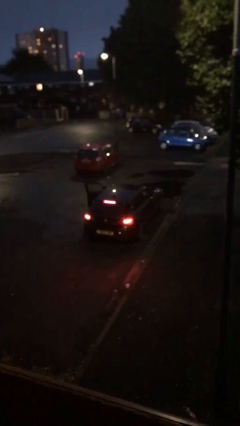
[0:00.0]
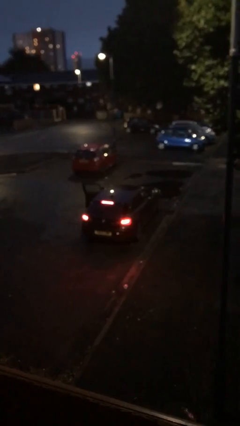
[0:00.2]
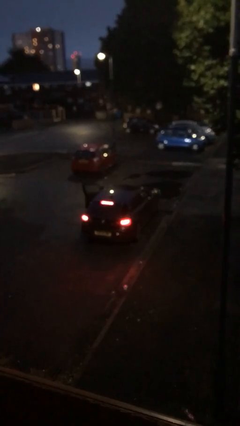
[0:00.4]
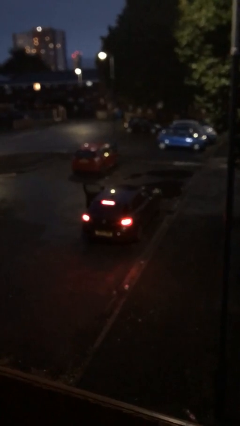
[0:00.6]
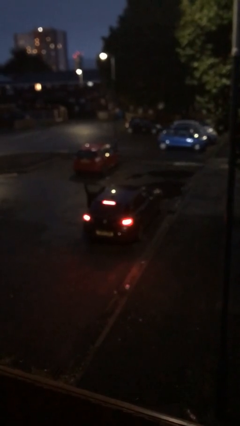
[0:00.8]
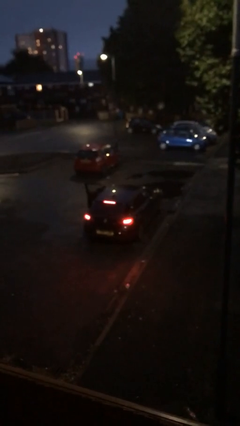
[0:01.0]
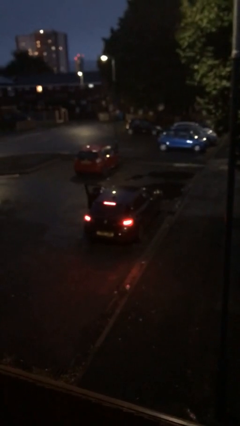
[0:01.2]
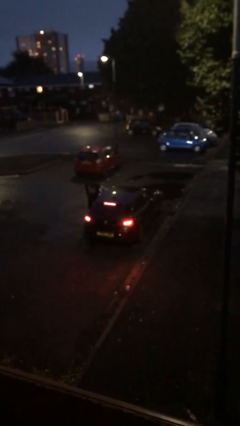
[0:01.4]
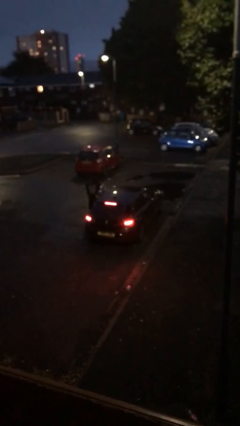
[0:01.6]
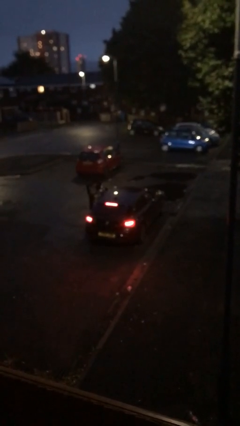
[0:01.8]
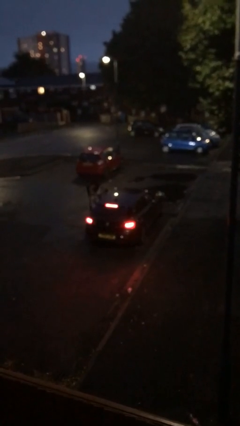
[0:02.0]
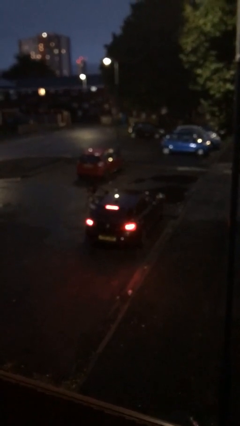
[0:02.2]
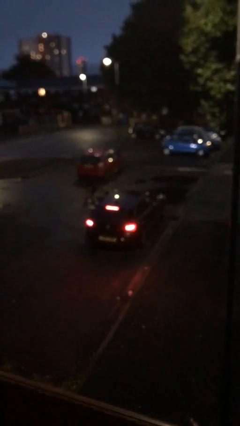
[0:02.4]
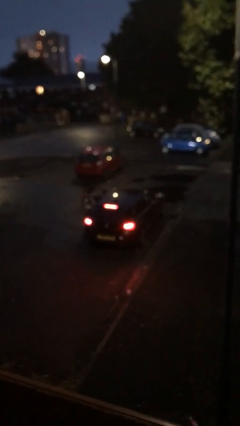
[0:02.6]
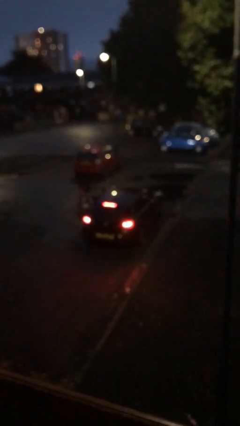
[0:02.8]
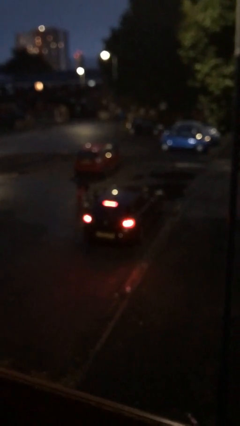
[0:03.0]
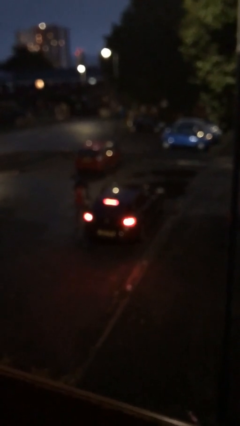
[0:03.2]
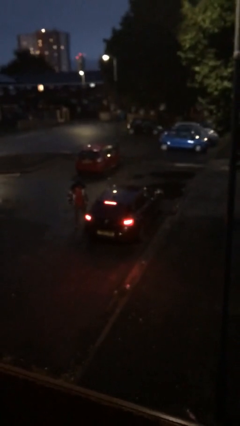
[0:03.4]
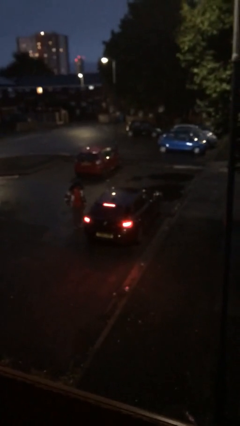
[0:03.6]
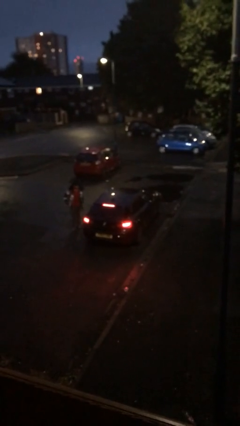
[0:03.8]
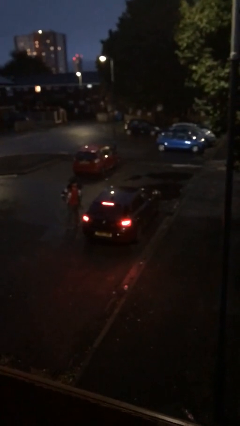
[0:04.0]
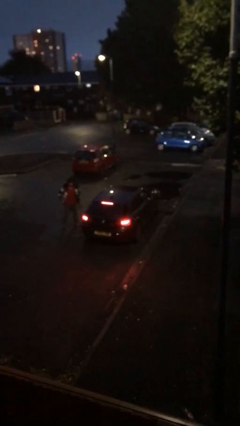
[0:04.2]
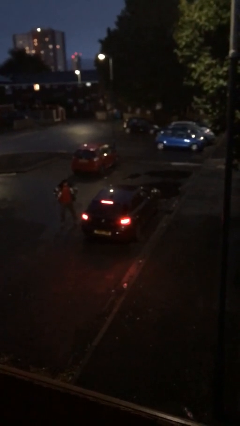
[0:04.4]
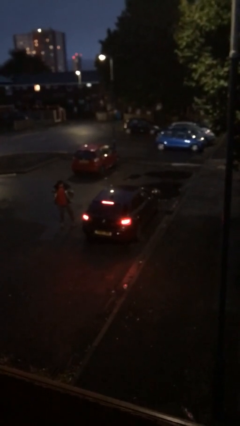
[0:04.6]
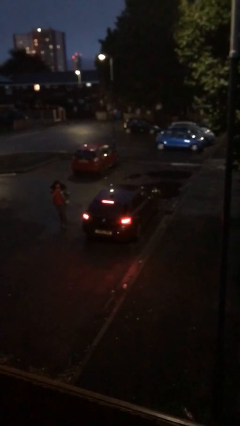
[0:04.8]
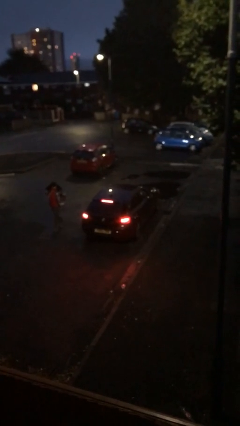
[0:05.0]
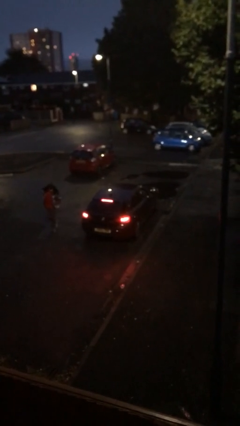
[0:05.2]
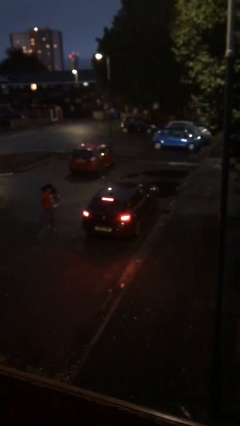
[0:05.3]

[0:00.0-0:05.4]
car drops off person

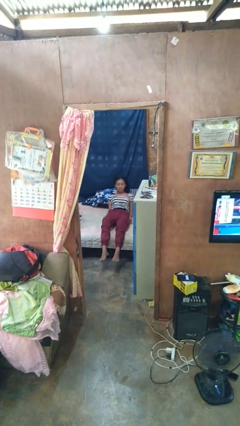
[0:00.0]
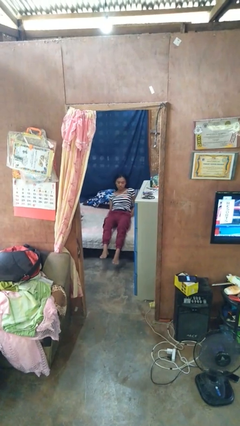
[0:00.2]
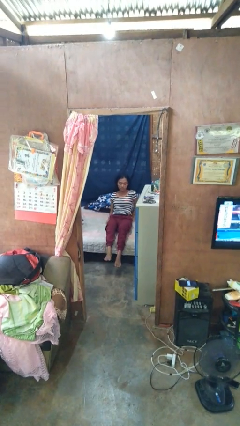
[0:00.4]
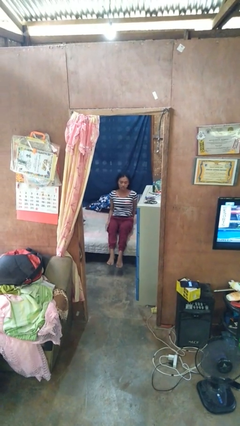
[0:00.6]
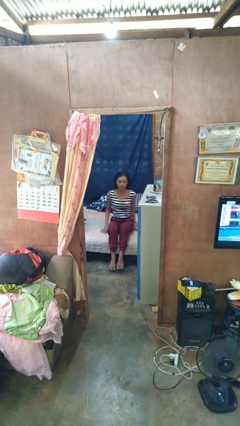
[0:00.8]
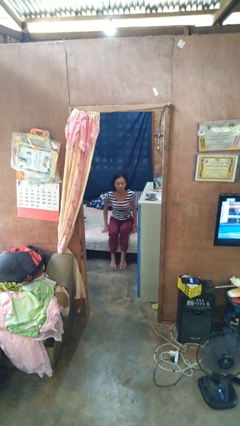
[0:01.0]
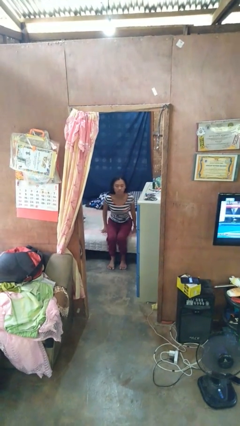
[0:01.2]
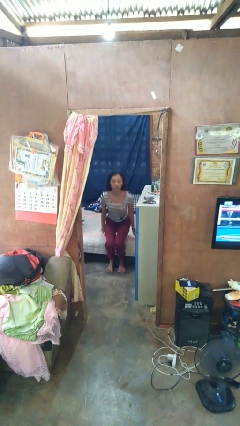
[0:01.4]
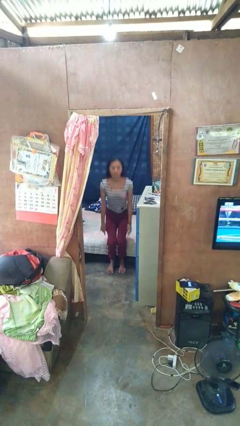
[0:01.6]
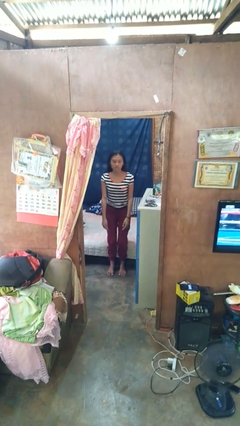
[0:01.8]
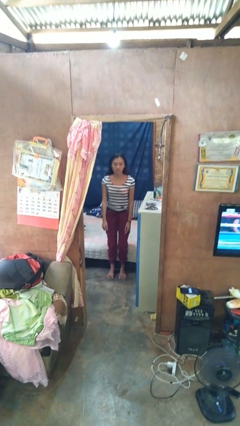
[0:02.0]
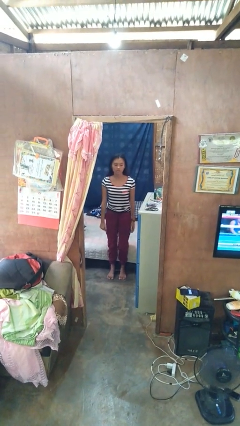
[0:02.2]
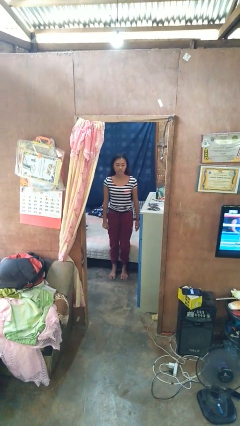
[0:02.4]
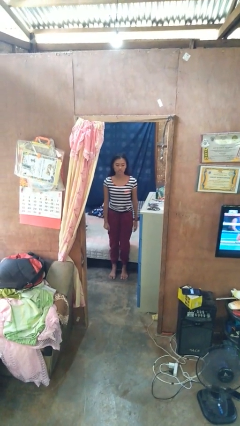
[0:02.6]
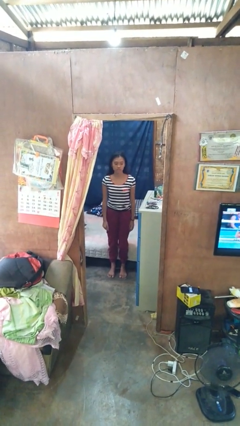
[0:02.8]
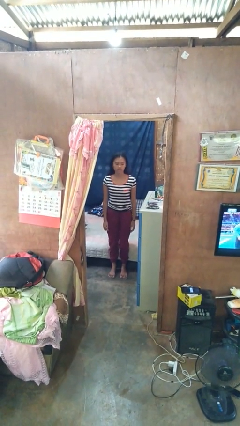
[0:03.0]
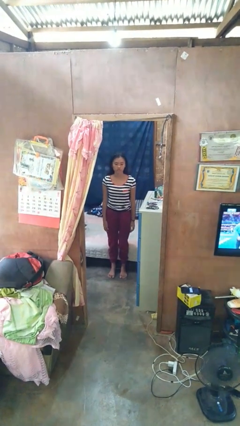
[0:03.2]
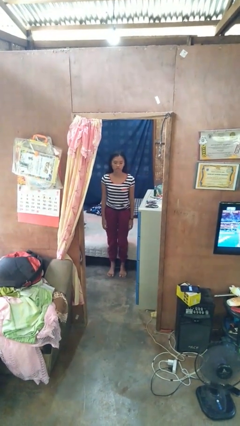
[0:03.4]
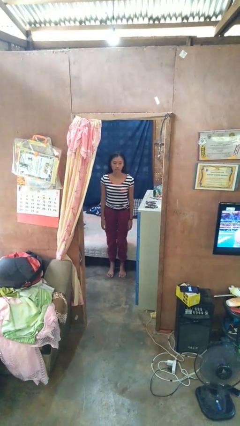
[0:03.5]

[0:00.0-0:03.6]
person stands up

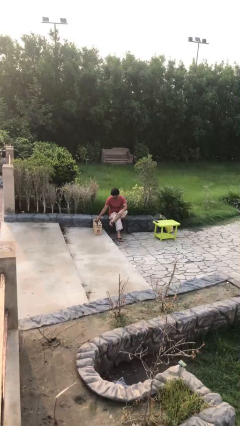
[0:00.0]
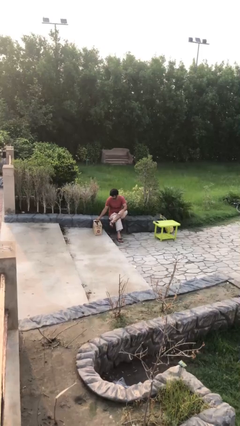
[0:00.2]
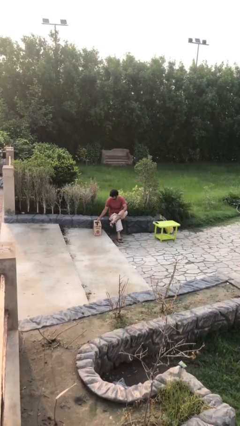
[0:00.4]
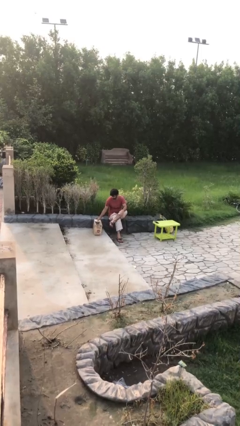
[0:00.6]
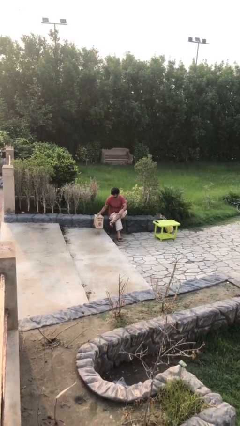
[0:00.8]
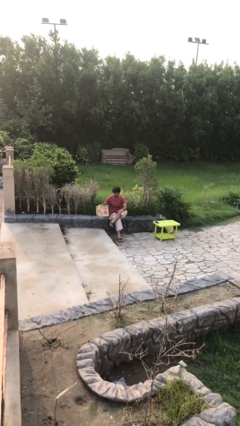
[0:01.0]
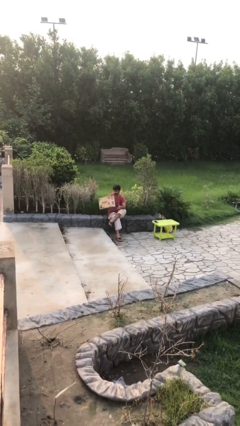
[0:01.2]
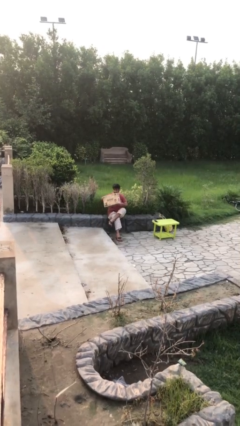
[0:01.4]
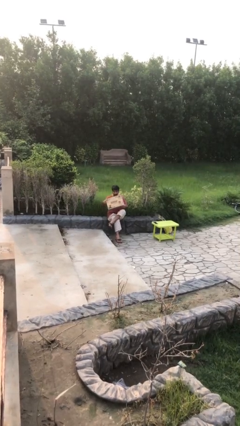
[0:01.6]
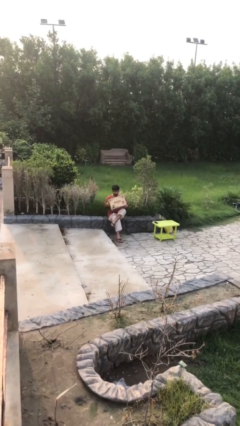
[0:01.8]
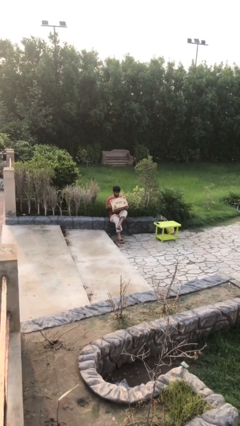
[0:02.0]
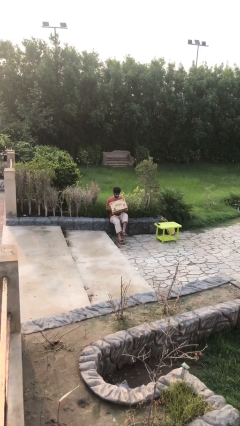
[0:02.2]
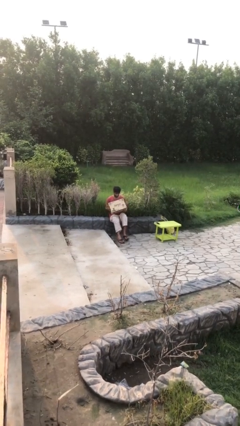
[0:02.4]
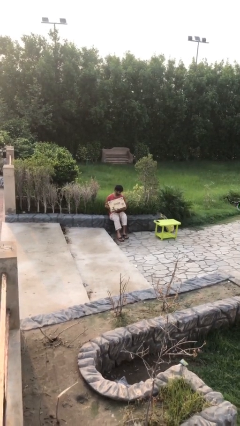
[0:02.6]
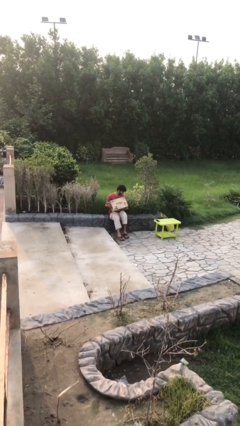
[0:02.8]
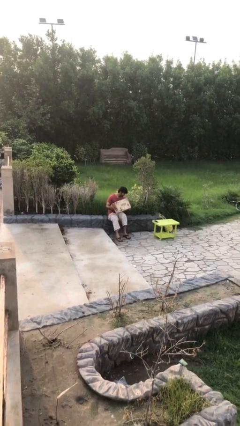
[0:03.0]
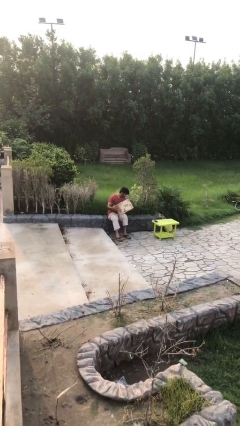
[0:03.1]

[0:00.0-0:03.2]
person picks up object from floor

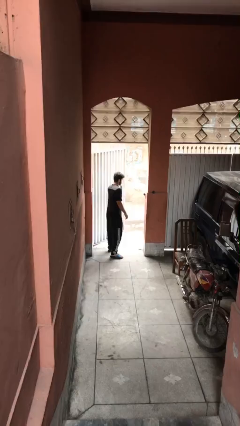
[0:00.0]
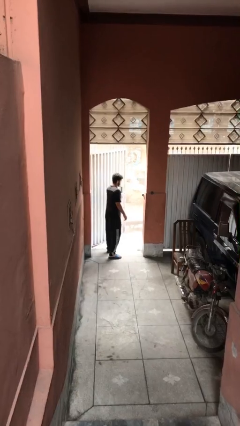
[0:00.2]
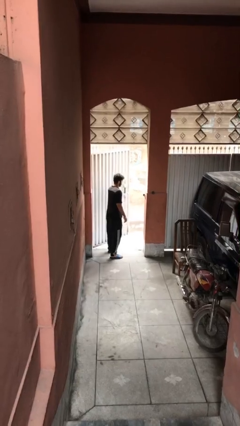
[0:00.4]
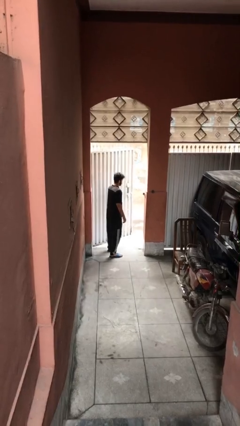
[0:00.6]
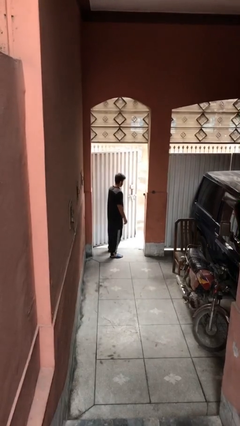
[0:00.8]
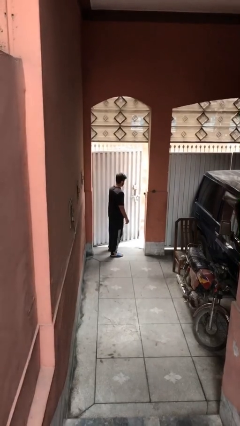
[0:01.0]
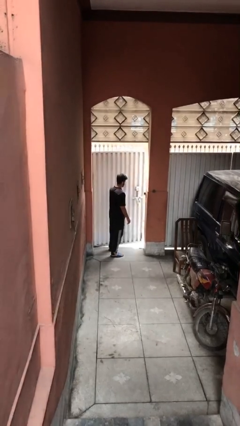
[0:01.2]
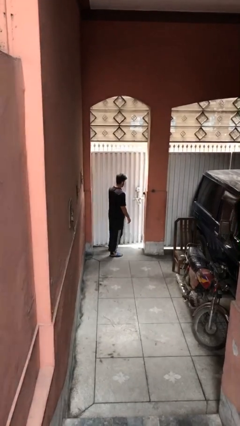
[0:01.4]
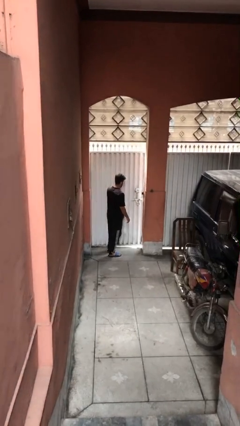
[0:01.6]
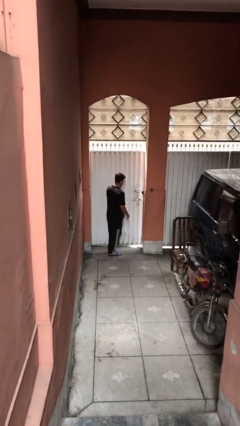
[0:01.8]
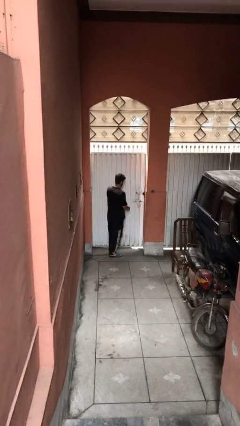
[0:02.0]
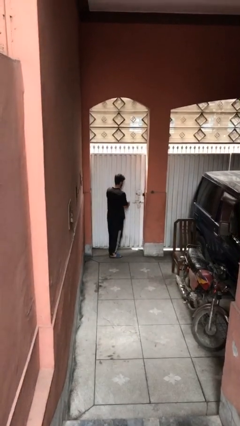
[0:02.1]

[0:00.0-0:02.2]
person closes facility door

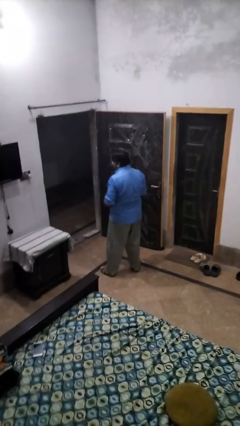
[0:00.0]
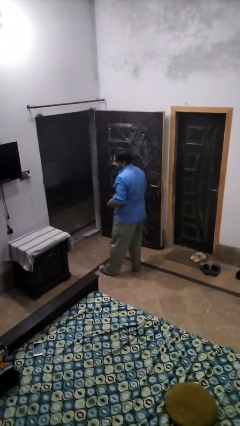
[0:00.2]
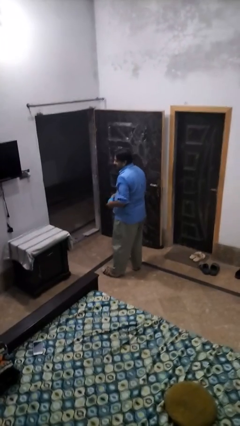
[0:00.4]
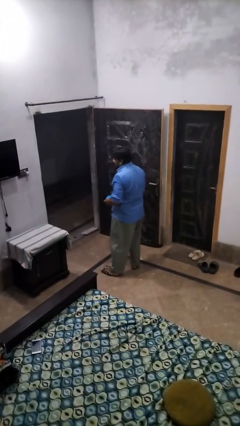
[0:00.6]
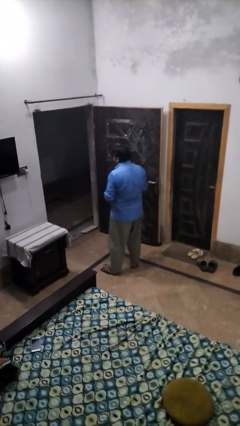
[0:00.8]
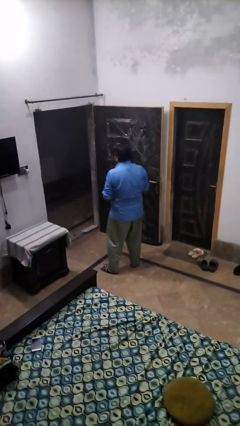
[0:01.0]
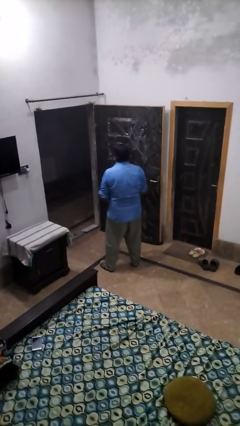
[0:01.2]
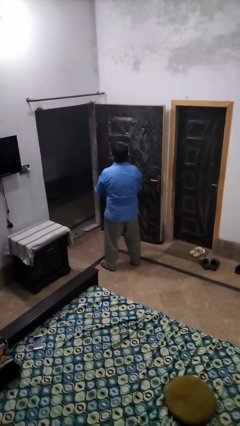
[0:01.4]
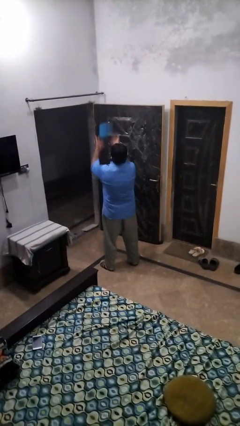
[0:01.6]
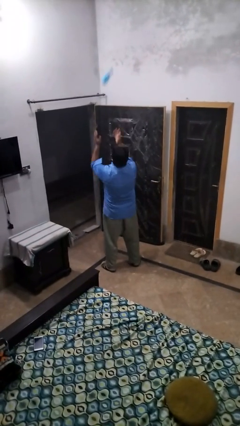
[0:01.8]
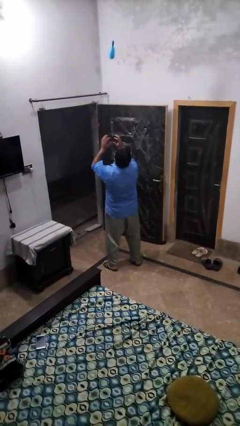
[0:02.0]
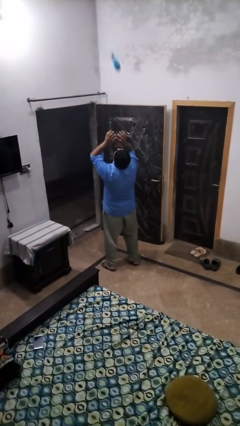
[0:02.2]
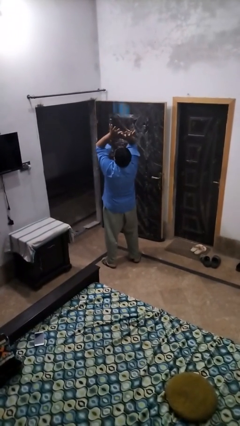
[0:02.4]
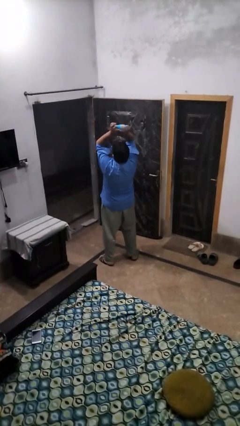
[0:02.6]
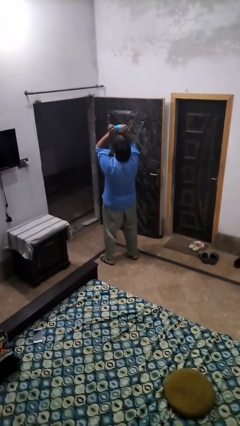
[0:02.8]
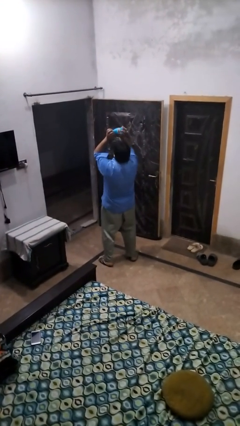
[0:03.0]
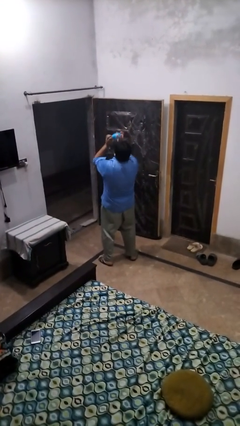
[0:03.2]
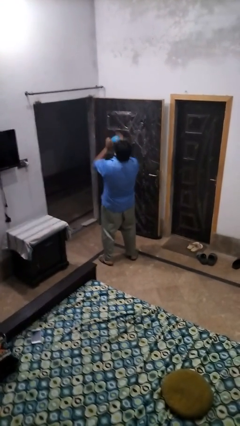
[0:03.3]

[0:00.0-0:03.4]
person drops object
